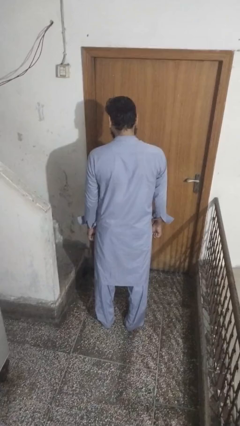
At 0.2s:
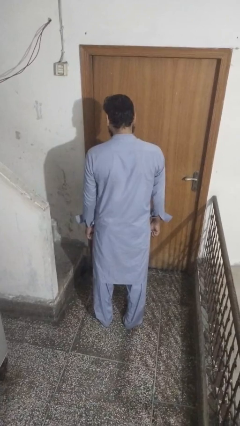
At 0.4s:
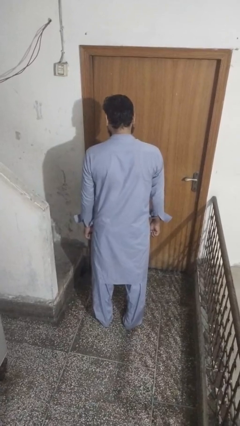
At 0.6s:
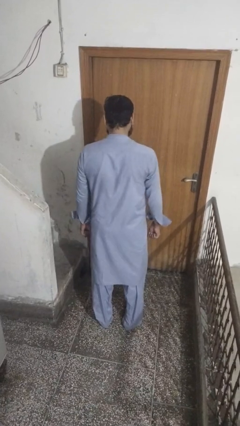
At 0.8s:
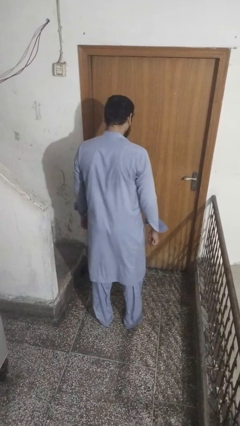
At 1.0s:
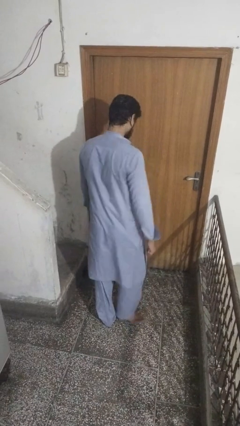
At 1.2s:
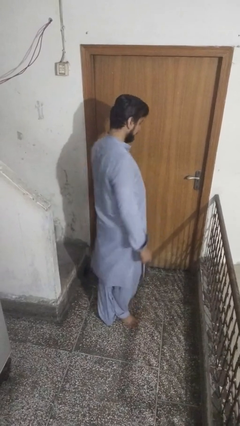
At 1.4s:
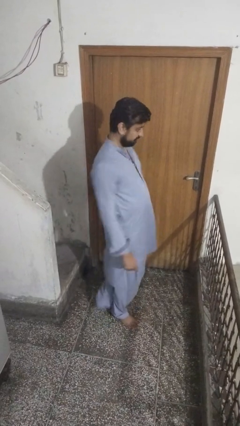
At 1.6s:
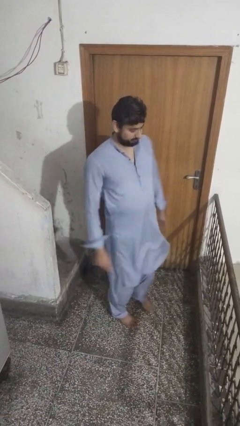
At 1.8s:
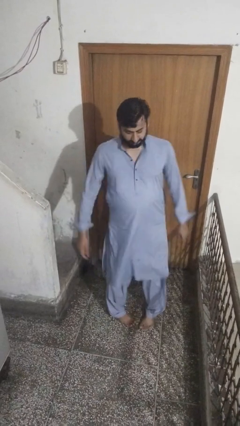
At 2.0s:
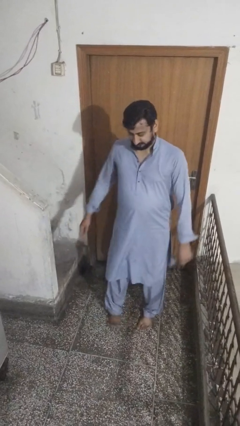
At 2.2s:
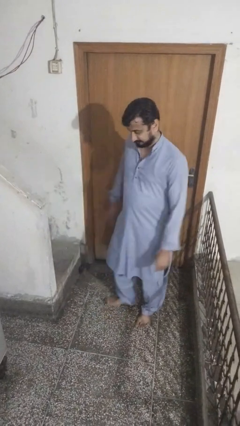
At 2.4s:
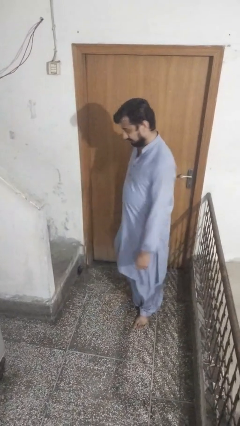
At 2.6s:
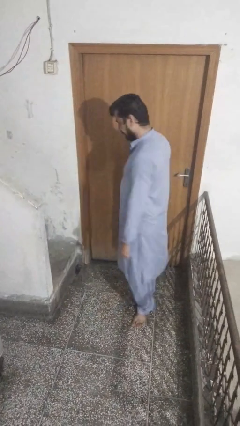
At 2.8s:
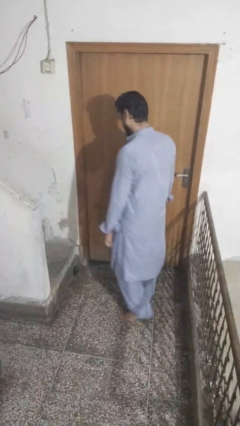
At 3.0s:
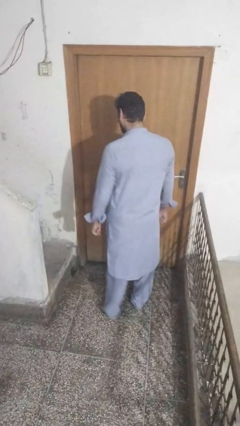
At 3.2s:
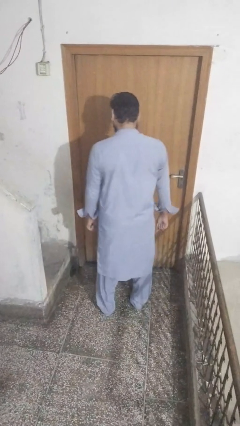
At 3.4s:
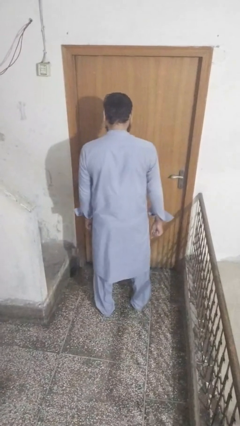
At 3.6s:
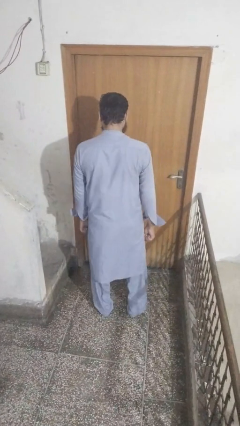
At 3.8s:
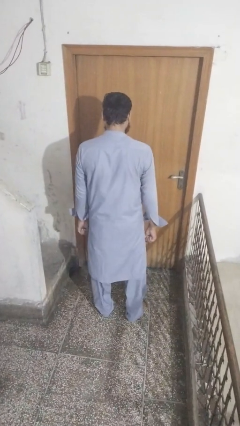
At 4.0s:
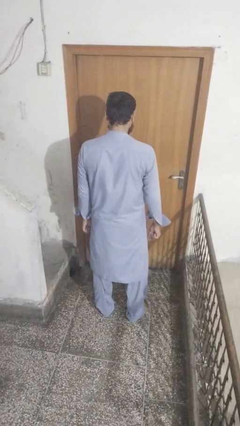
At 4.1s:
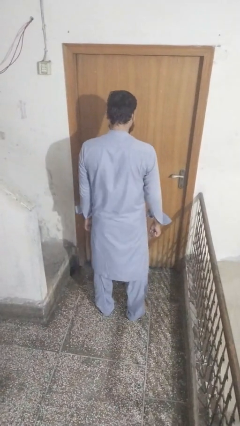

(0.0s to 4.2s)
person twirls

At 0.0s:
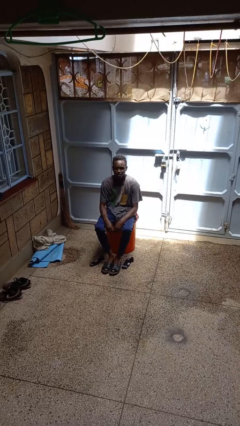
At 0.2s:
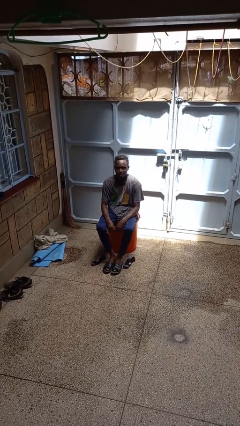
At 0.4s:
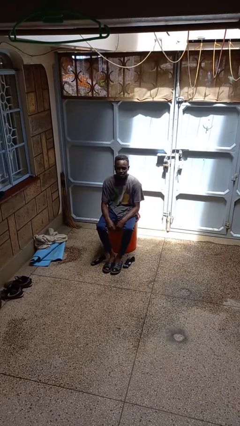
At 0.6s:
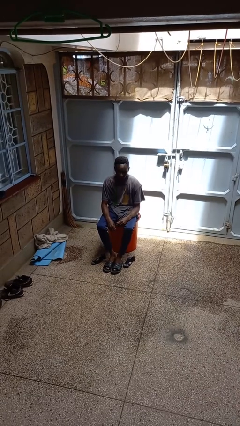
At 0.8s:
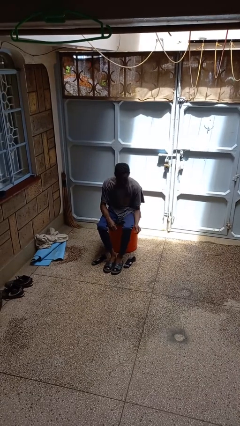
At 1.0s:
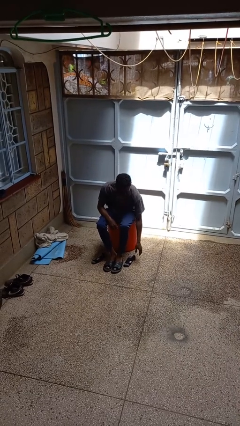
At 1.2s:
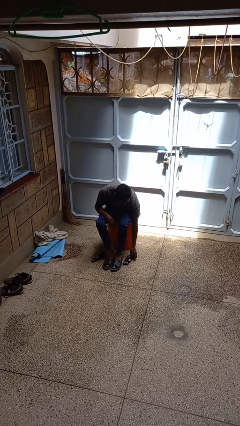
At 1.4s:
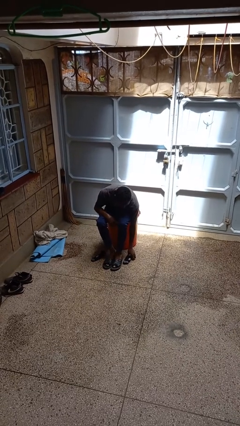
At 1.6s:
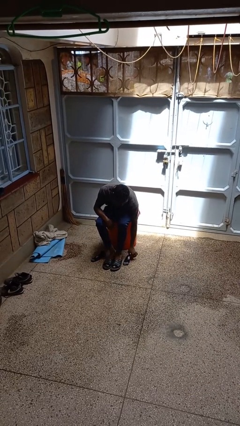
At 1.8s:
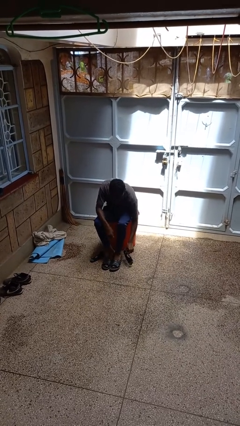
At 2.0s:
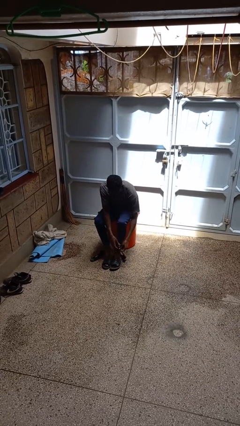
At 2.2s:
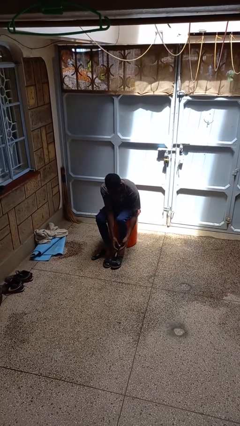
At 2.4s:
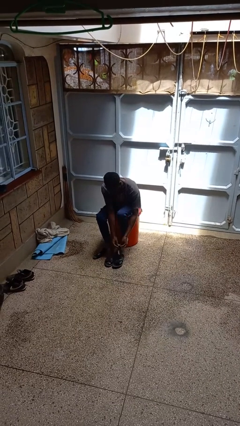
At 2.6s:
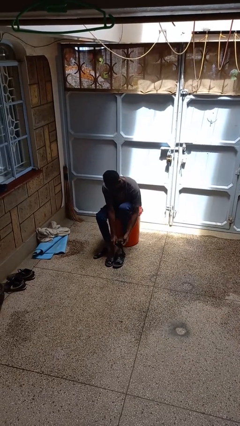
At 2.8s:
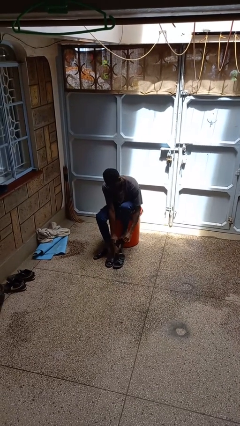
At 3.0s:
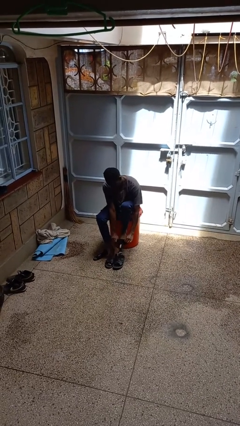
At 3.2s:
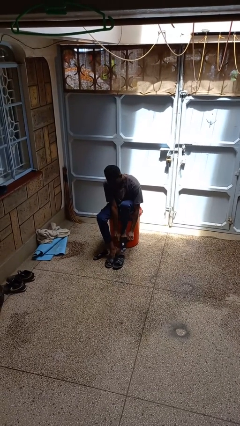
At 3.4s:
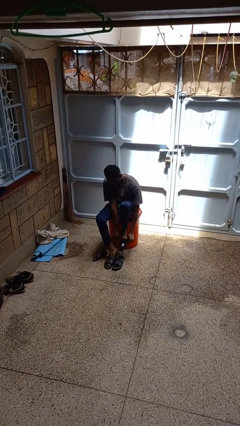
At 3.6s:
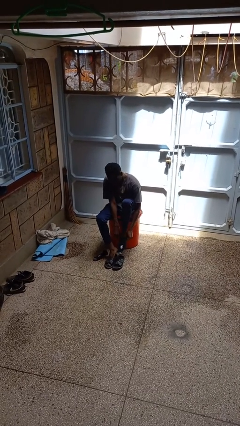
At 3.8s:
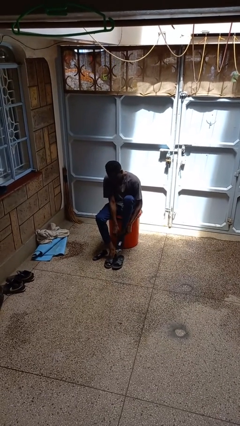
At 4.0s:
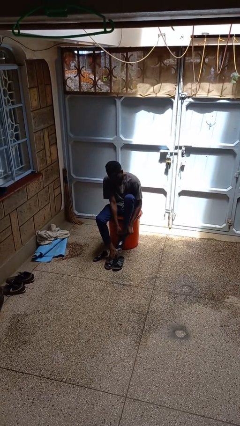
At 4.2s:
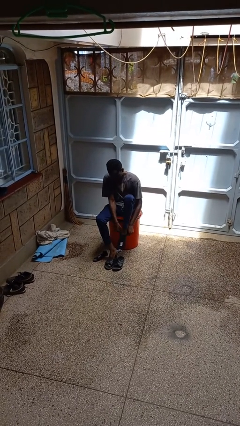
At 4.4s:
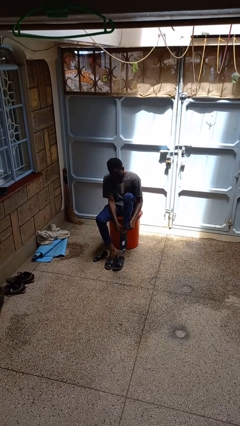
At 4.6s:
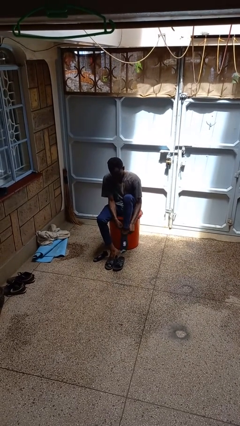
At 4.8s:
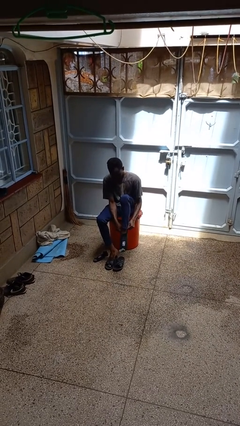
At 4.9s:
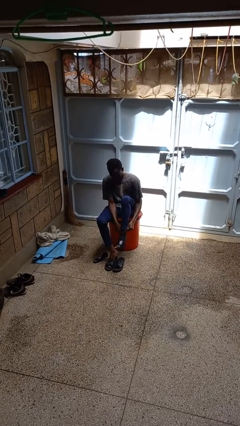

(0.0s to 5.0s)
person puts on socks

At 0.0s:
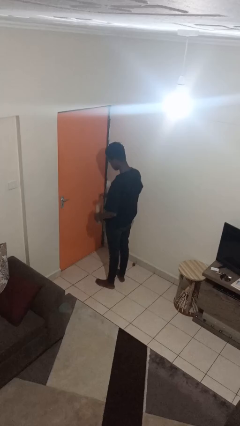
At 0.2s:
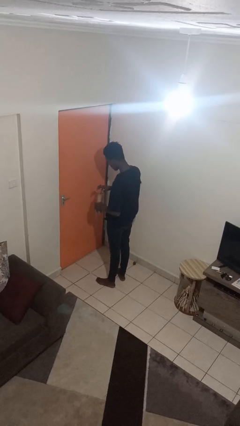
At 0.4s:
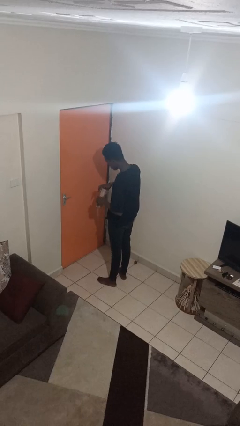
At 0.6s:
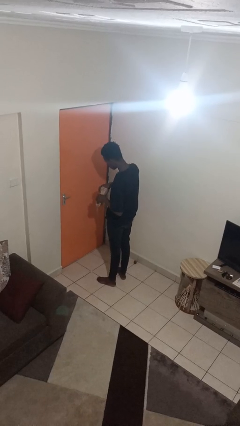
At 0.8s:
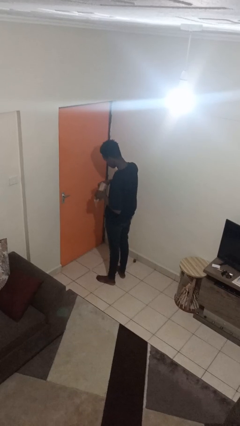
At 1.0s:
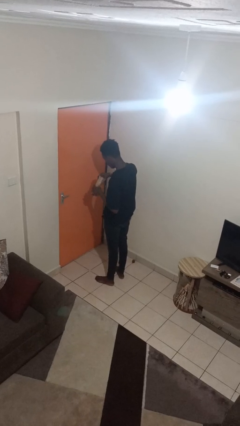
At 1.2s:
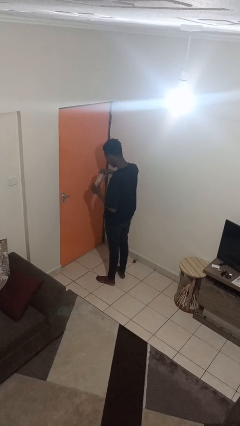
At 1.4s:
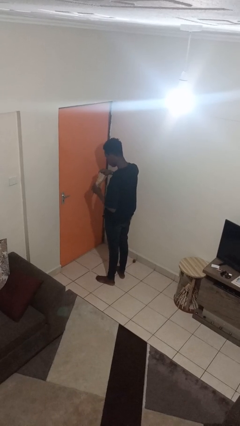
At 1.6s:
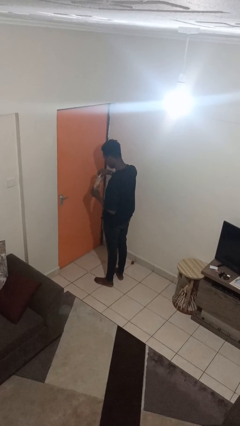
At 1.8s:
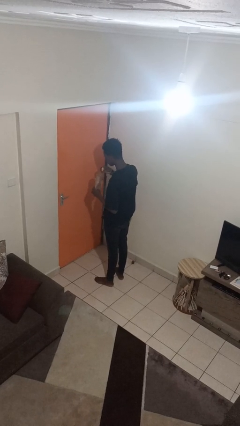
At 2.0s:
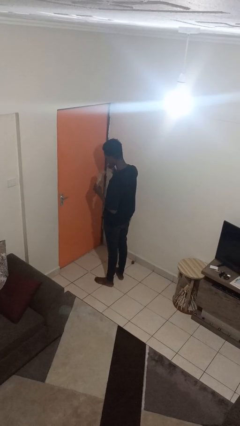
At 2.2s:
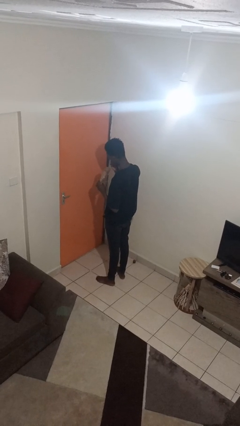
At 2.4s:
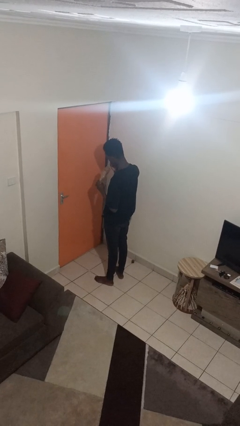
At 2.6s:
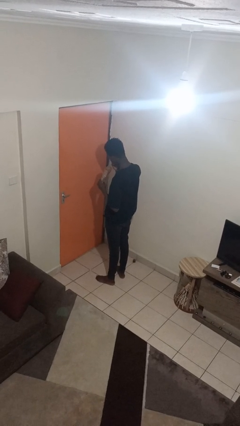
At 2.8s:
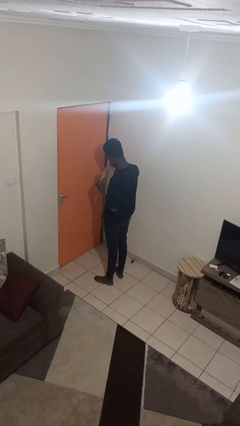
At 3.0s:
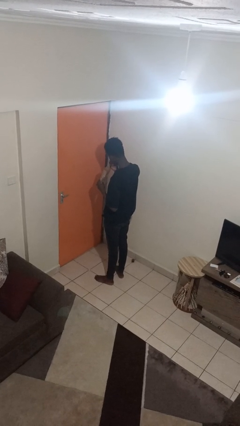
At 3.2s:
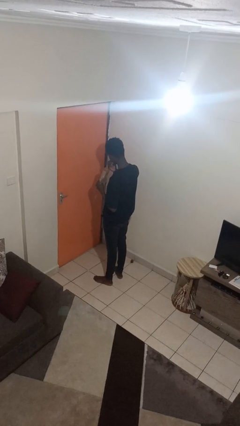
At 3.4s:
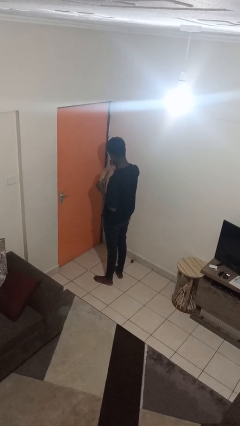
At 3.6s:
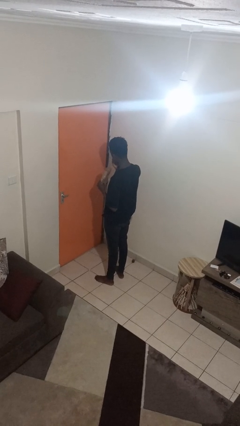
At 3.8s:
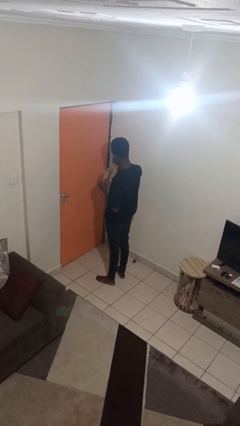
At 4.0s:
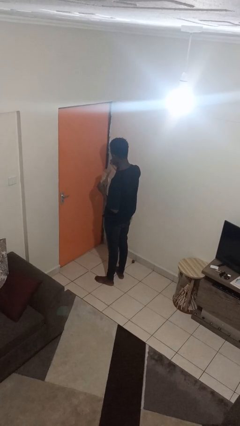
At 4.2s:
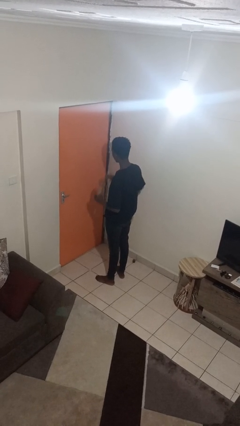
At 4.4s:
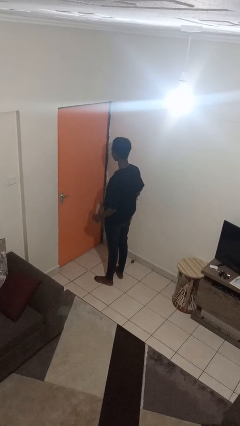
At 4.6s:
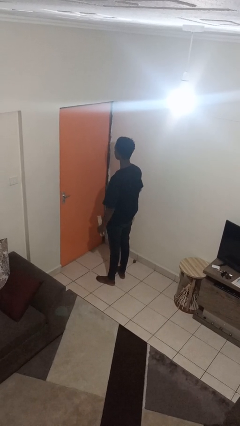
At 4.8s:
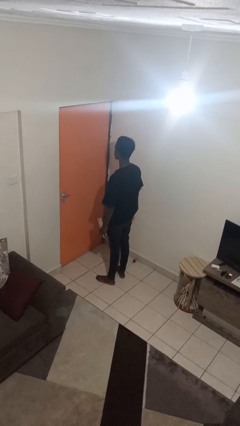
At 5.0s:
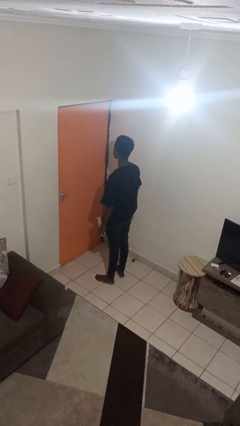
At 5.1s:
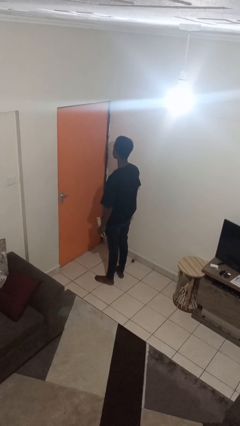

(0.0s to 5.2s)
person eats snack from bag

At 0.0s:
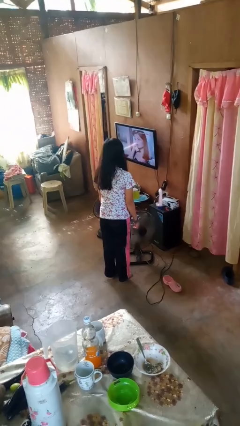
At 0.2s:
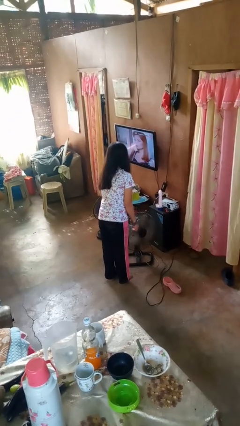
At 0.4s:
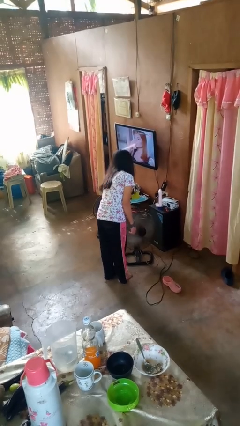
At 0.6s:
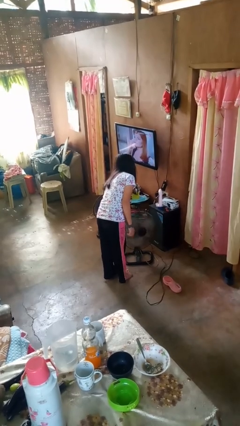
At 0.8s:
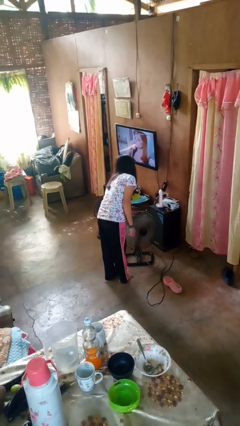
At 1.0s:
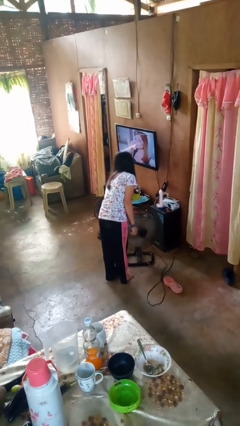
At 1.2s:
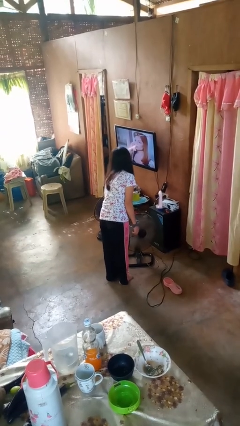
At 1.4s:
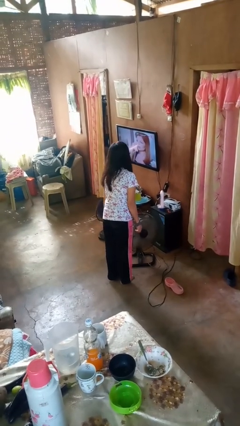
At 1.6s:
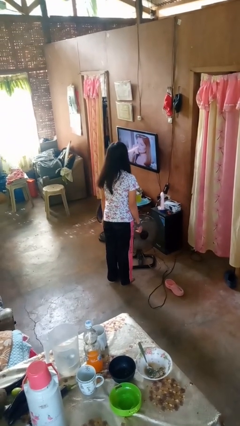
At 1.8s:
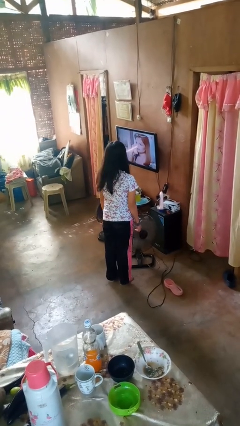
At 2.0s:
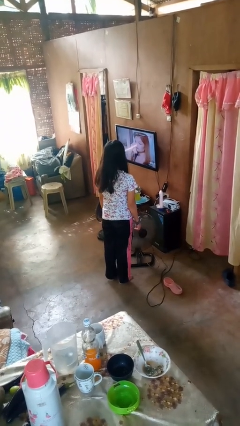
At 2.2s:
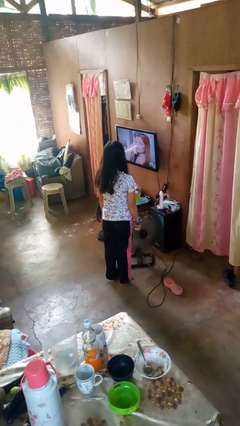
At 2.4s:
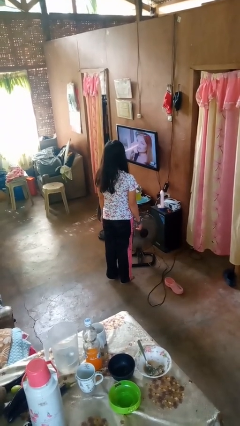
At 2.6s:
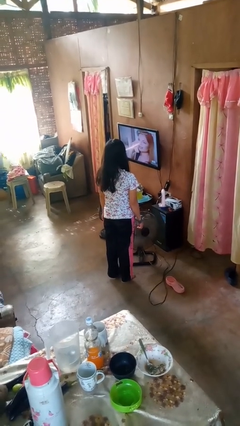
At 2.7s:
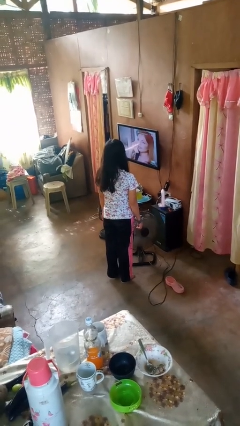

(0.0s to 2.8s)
person turns on fan

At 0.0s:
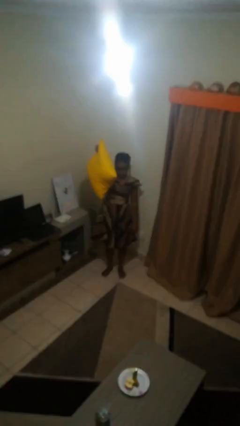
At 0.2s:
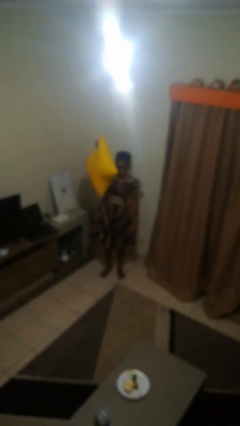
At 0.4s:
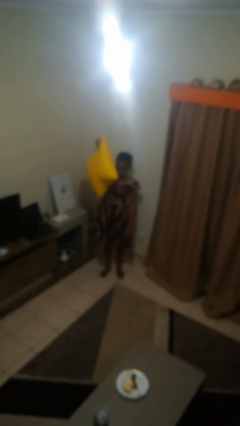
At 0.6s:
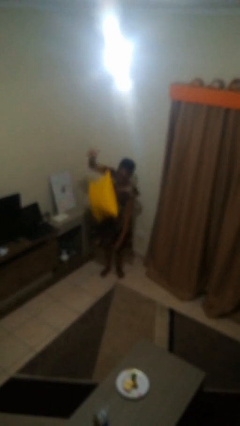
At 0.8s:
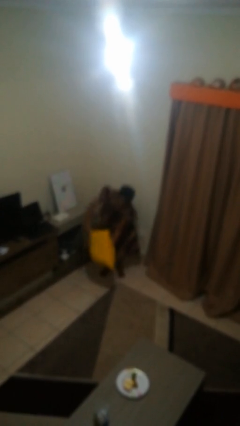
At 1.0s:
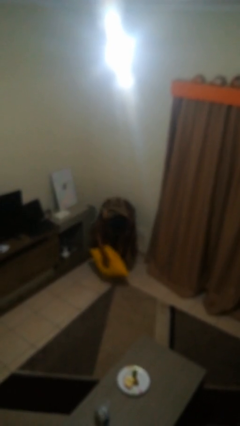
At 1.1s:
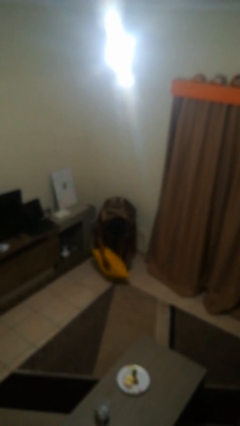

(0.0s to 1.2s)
person drops object
